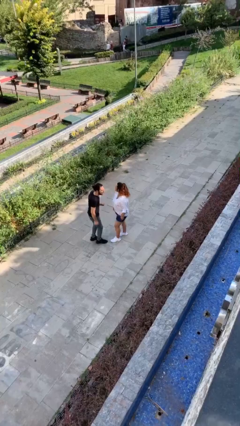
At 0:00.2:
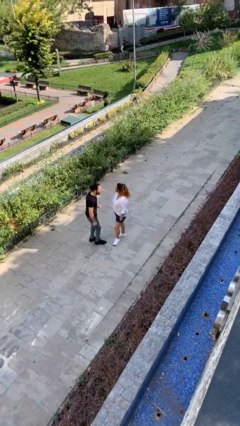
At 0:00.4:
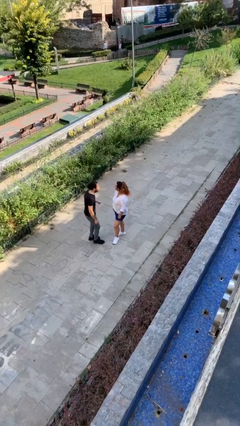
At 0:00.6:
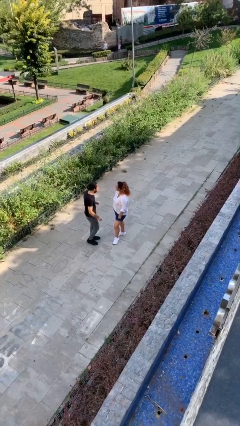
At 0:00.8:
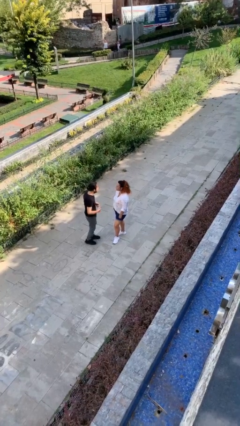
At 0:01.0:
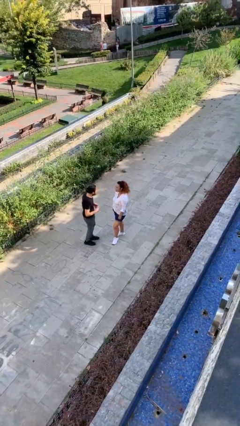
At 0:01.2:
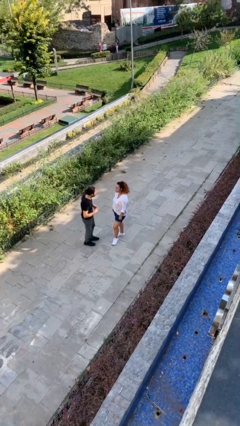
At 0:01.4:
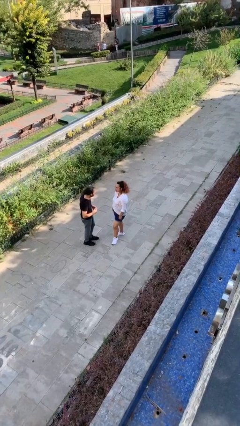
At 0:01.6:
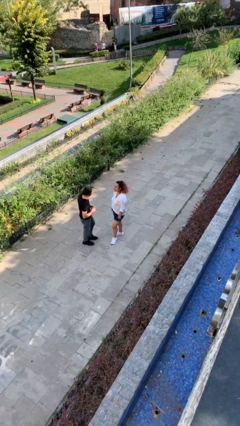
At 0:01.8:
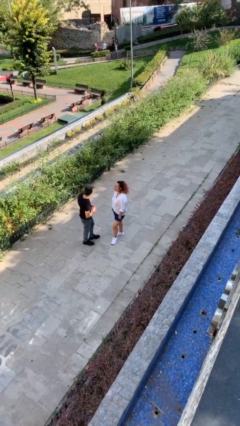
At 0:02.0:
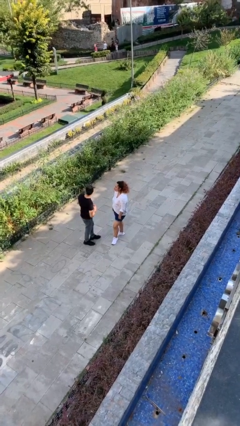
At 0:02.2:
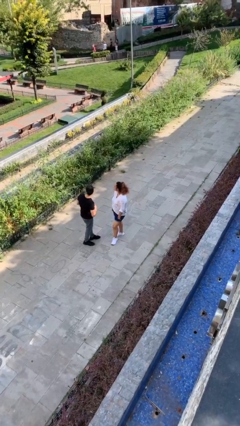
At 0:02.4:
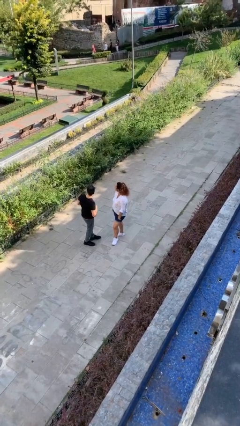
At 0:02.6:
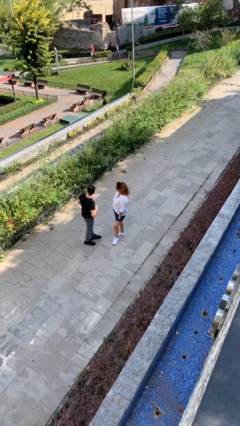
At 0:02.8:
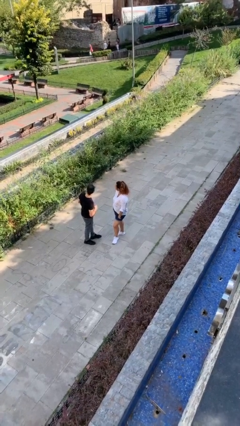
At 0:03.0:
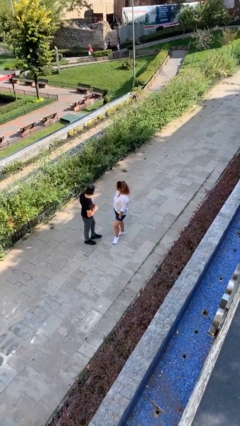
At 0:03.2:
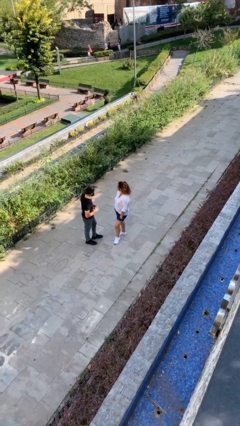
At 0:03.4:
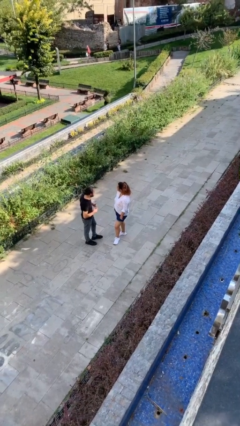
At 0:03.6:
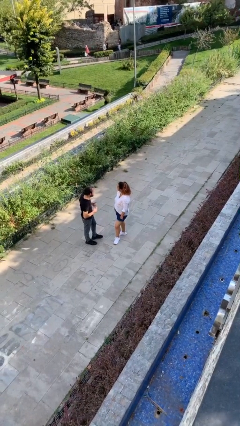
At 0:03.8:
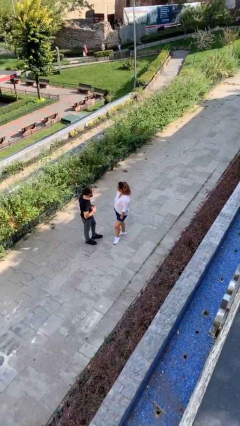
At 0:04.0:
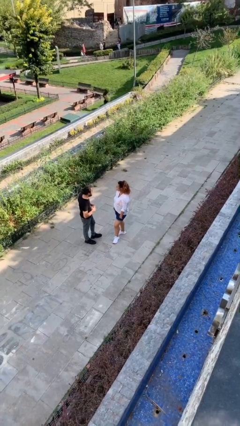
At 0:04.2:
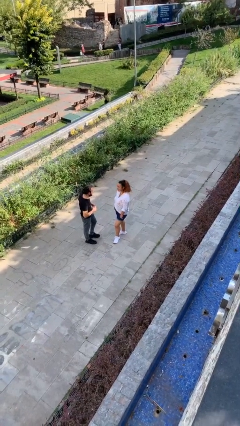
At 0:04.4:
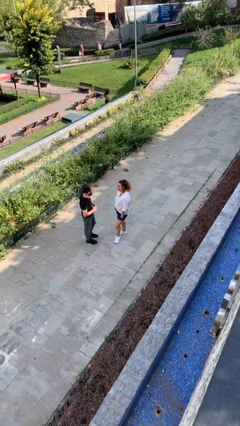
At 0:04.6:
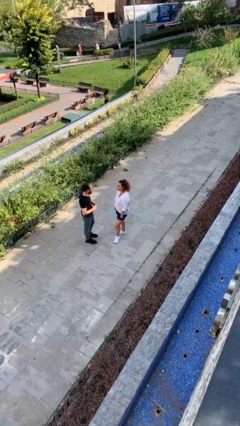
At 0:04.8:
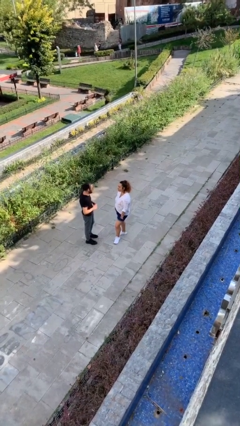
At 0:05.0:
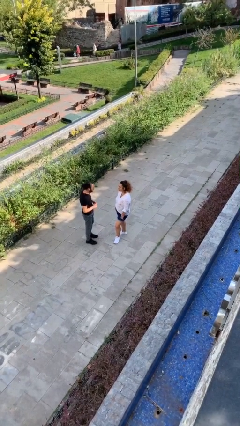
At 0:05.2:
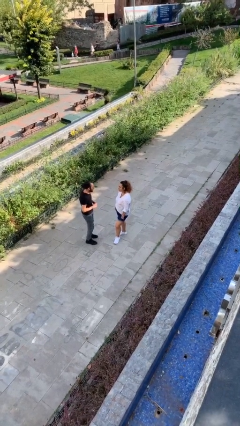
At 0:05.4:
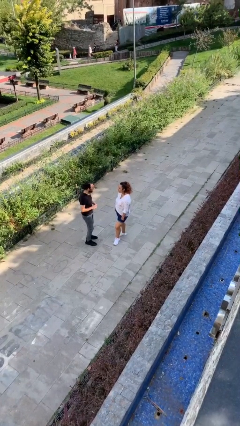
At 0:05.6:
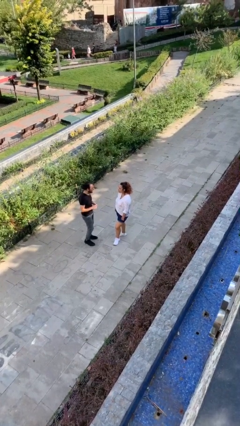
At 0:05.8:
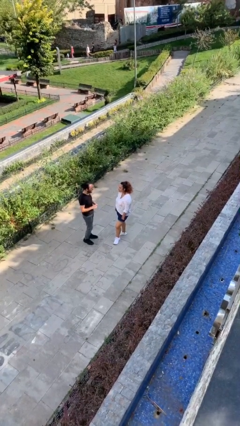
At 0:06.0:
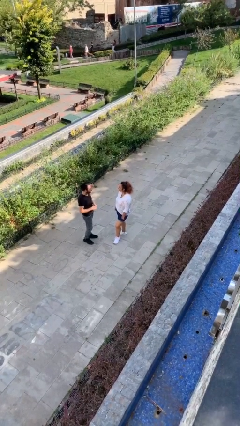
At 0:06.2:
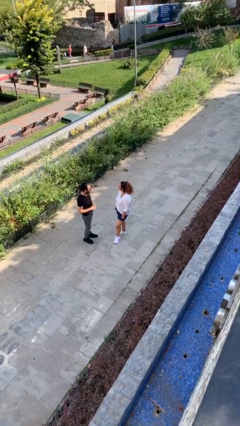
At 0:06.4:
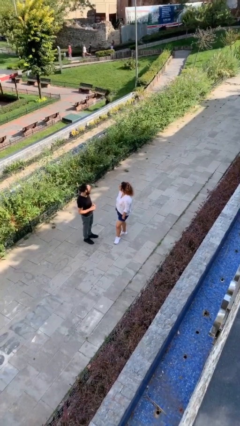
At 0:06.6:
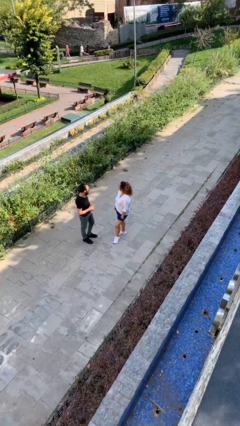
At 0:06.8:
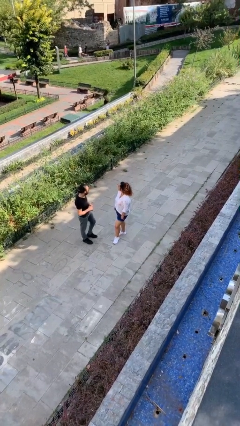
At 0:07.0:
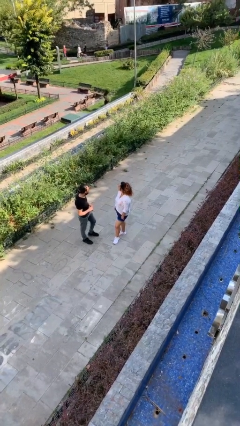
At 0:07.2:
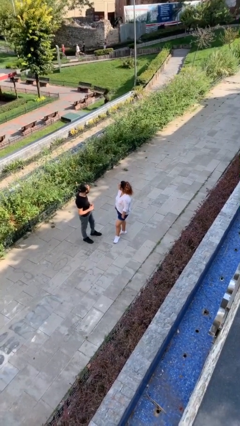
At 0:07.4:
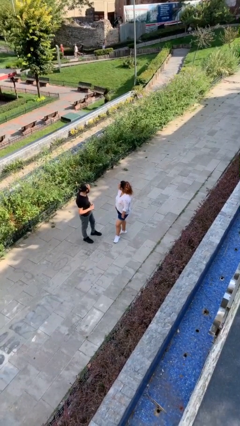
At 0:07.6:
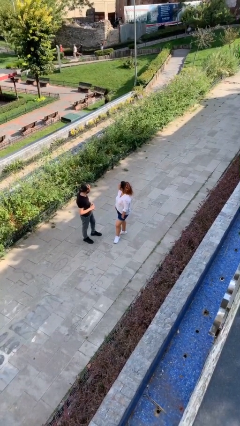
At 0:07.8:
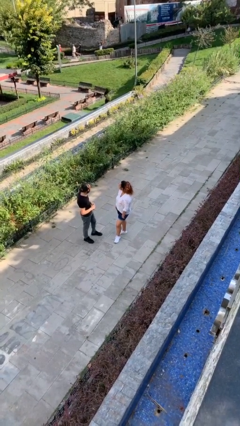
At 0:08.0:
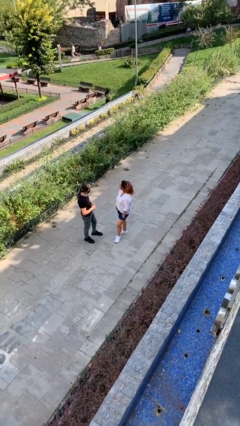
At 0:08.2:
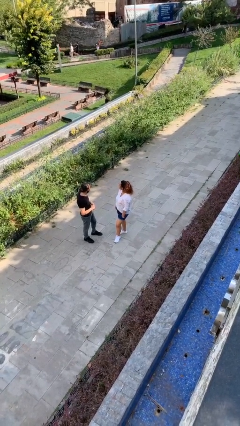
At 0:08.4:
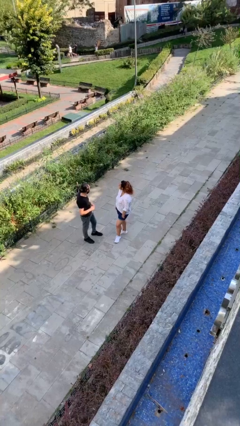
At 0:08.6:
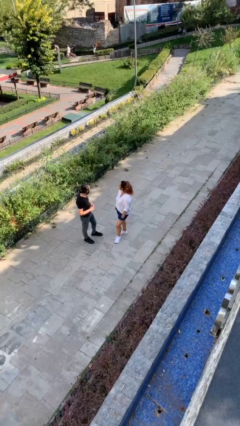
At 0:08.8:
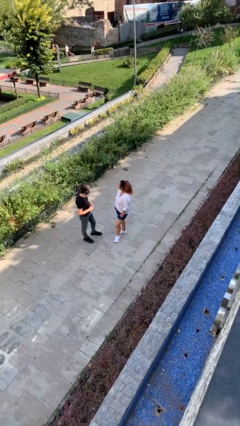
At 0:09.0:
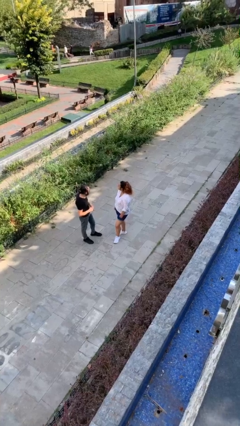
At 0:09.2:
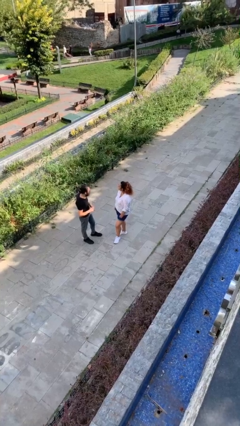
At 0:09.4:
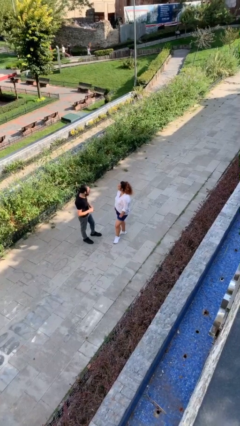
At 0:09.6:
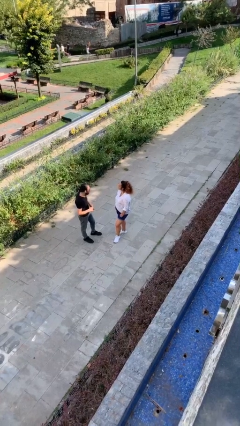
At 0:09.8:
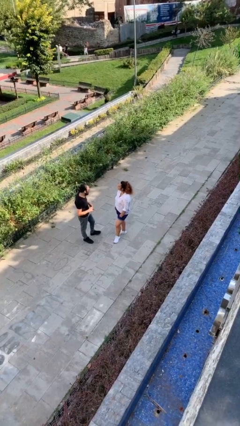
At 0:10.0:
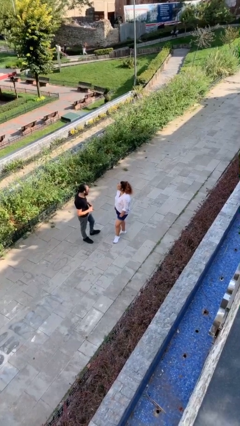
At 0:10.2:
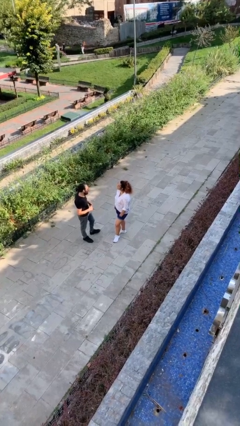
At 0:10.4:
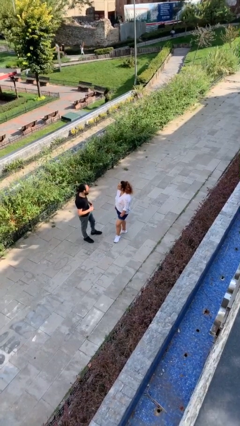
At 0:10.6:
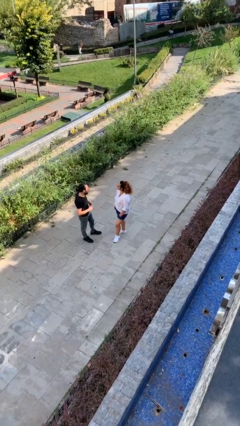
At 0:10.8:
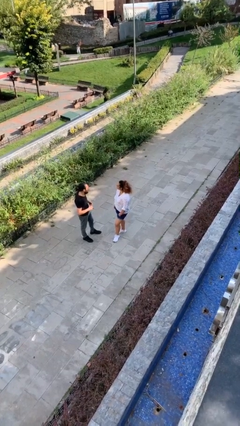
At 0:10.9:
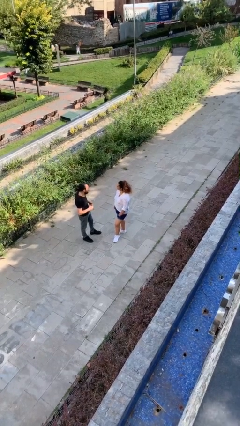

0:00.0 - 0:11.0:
person talks to person

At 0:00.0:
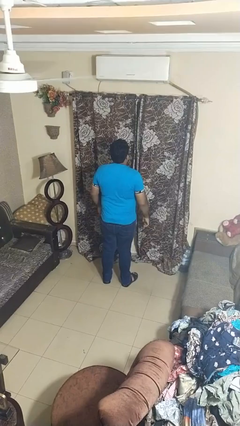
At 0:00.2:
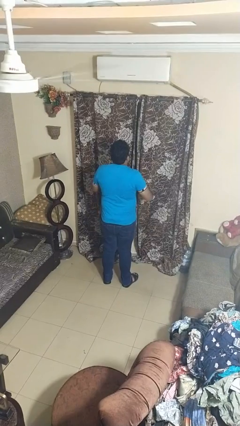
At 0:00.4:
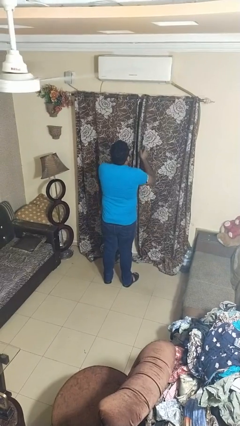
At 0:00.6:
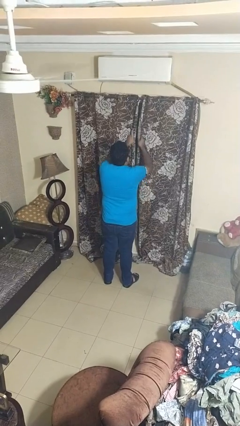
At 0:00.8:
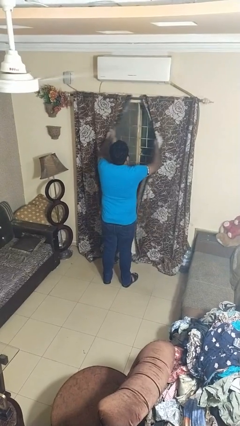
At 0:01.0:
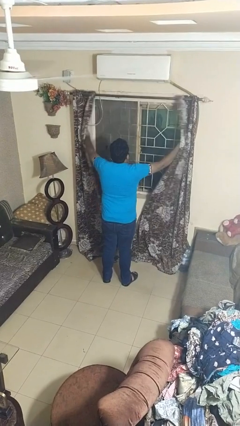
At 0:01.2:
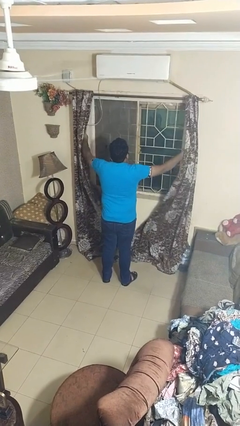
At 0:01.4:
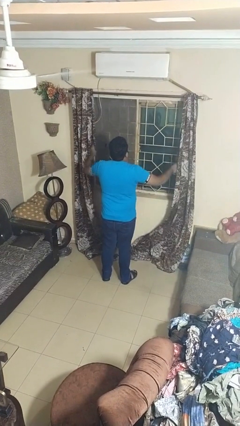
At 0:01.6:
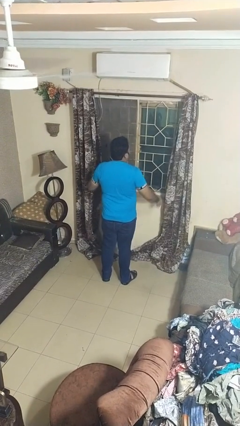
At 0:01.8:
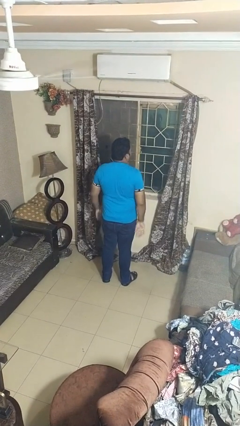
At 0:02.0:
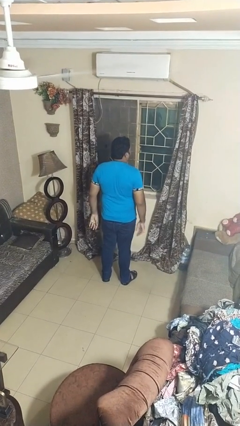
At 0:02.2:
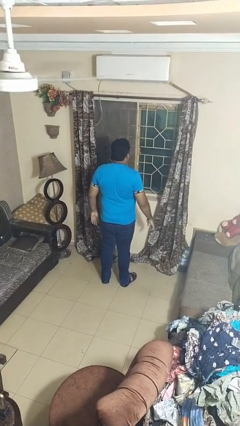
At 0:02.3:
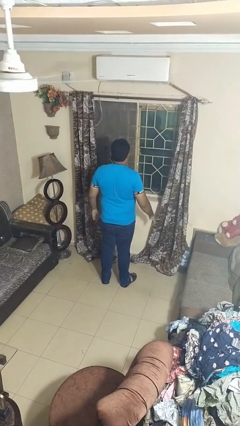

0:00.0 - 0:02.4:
person opens curtains

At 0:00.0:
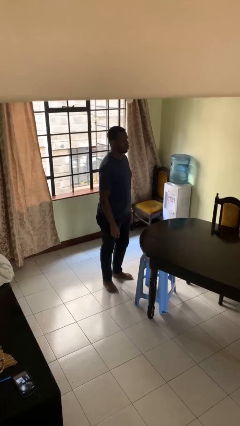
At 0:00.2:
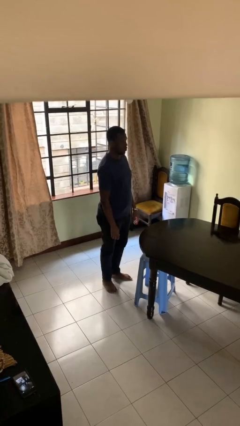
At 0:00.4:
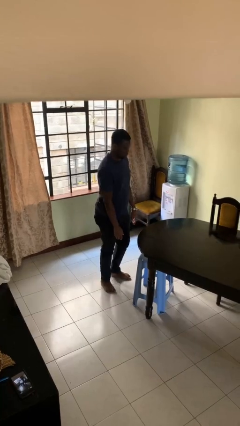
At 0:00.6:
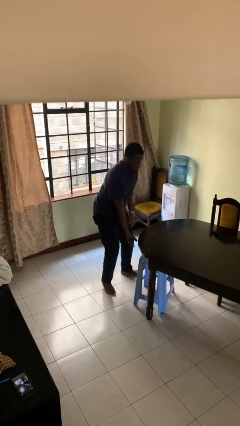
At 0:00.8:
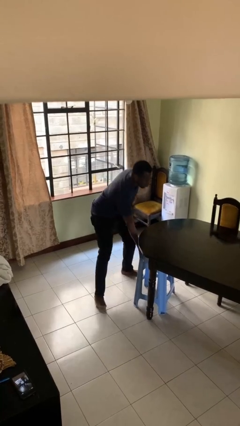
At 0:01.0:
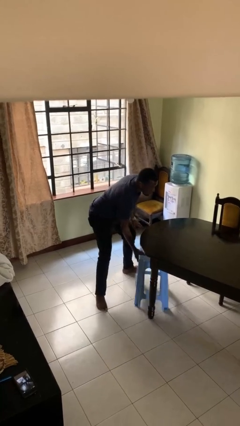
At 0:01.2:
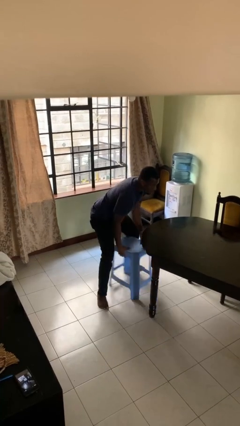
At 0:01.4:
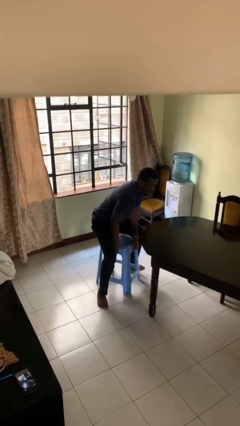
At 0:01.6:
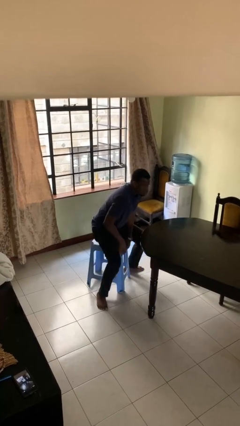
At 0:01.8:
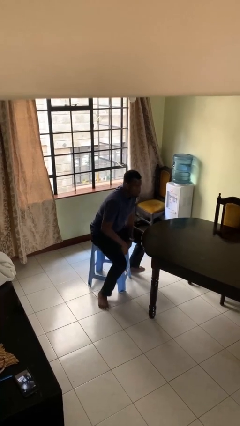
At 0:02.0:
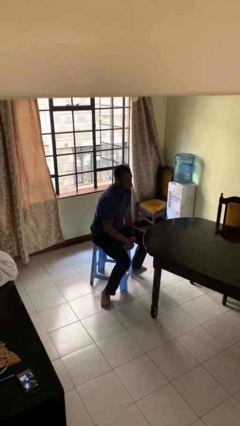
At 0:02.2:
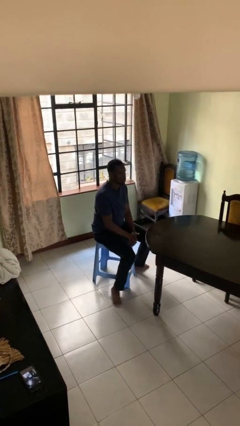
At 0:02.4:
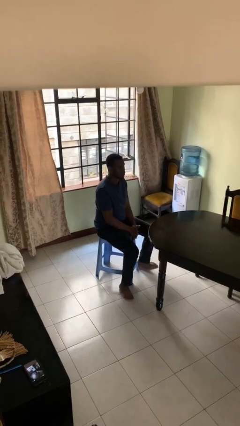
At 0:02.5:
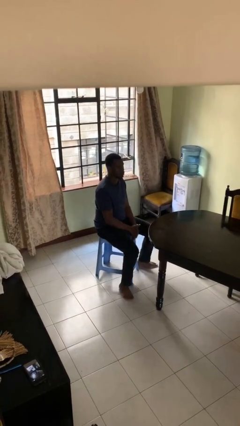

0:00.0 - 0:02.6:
person sits down

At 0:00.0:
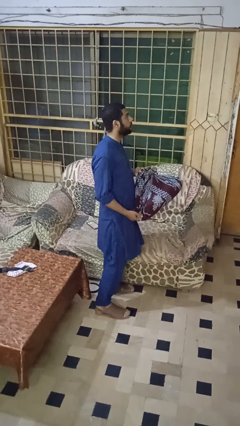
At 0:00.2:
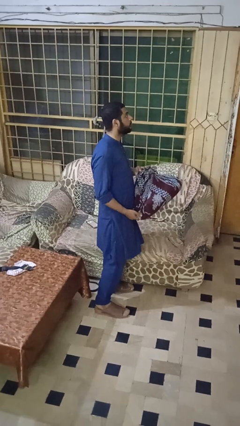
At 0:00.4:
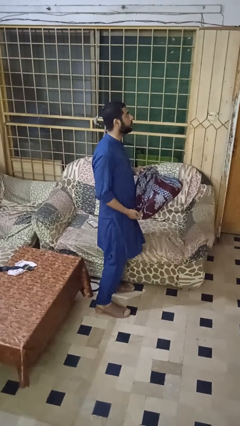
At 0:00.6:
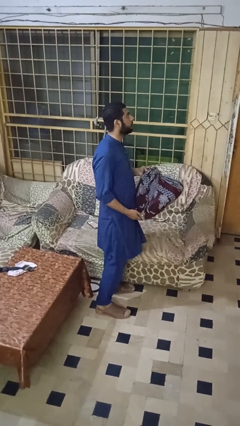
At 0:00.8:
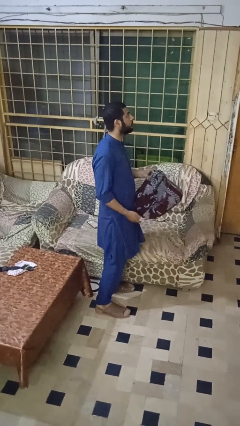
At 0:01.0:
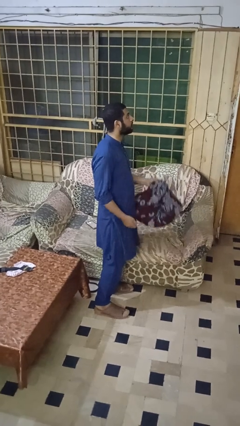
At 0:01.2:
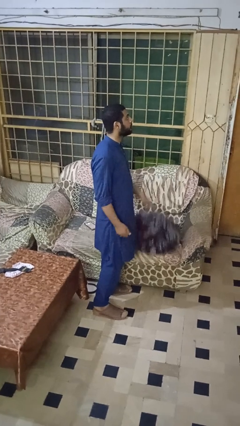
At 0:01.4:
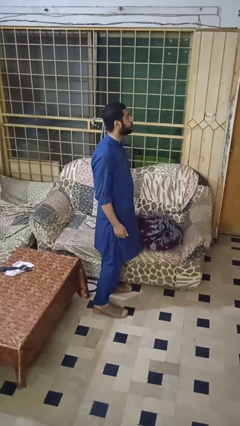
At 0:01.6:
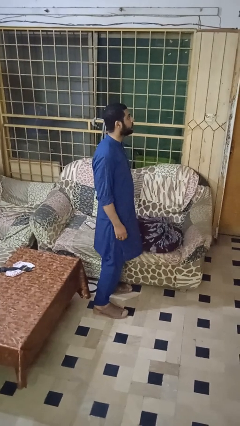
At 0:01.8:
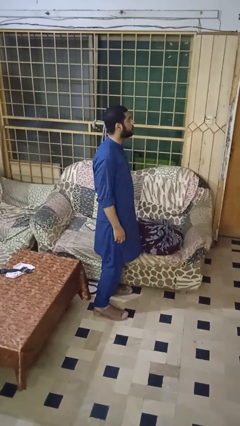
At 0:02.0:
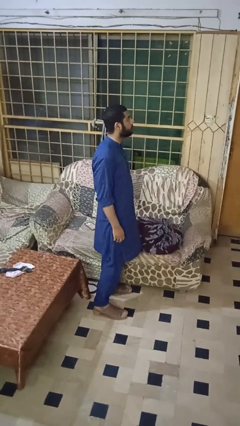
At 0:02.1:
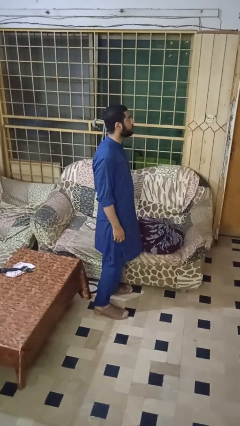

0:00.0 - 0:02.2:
person puts down object on couch
